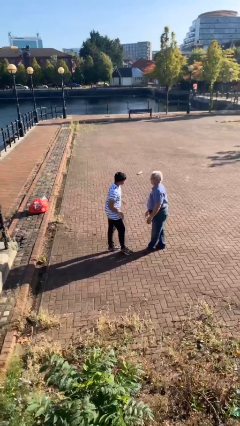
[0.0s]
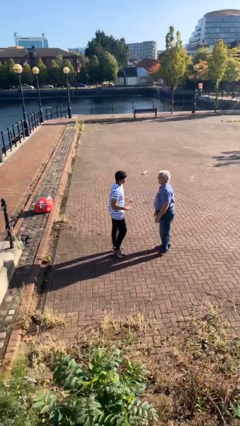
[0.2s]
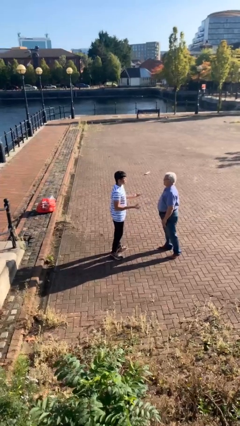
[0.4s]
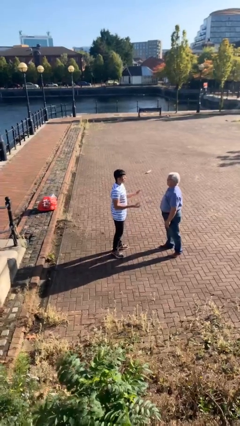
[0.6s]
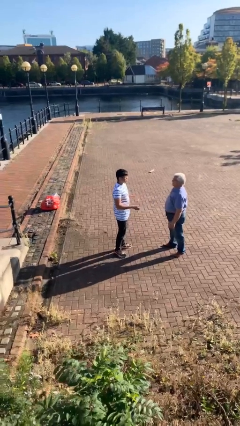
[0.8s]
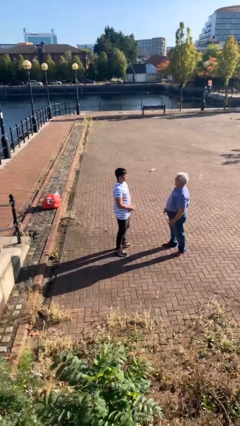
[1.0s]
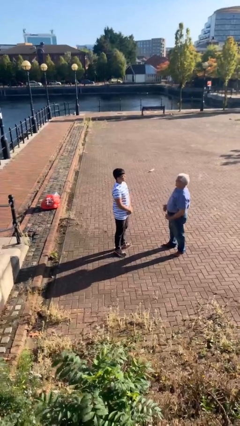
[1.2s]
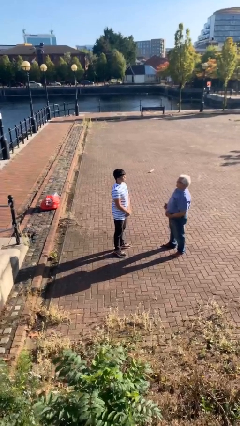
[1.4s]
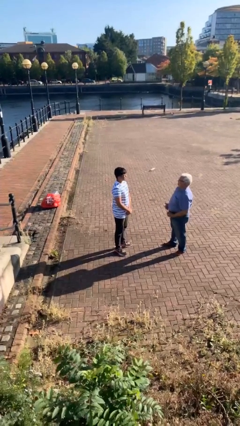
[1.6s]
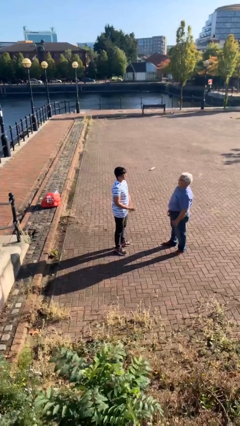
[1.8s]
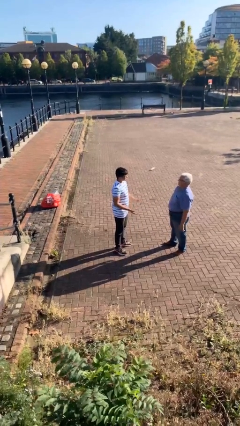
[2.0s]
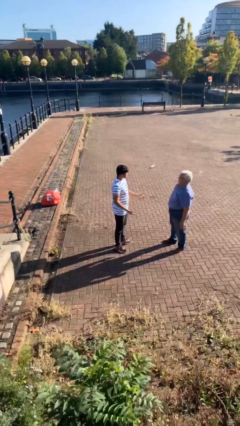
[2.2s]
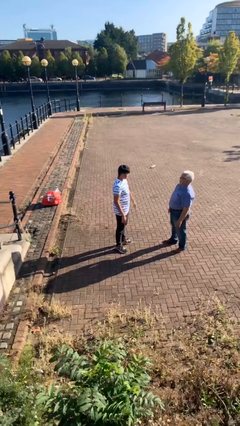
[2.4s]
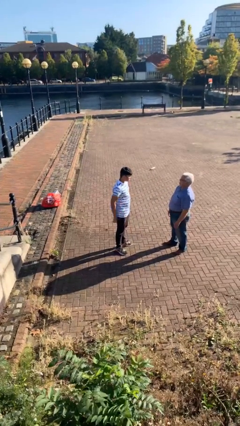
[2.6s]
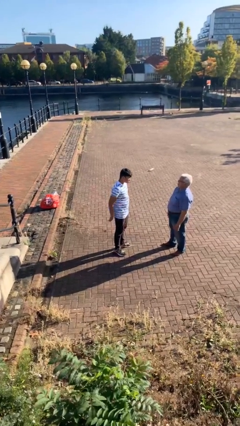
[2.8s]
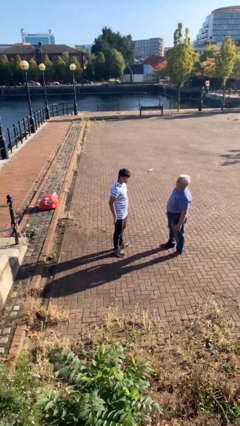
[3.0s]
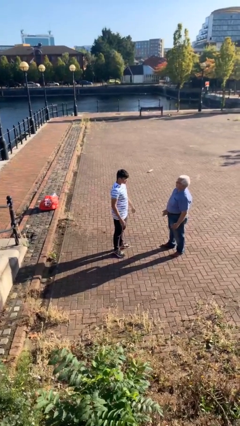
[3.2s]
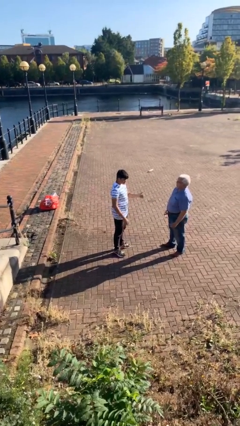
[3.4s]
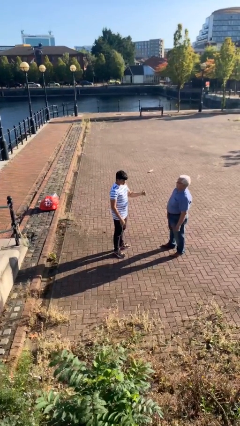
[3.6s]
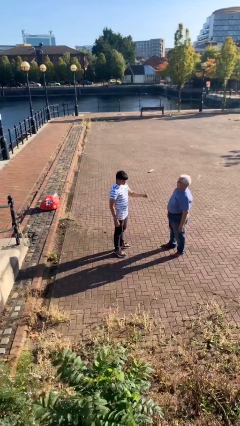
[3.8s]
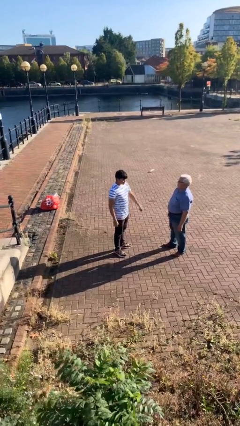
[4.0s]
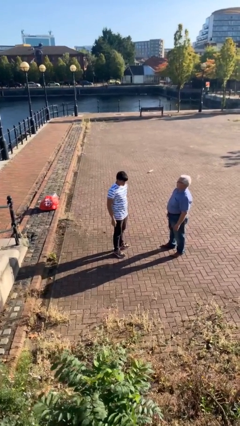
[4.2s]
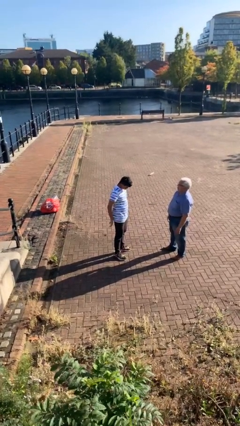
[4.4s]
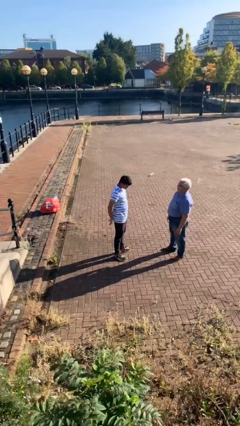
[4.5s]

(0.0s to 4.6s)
person talks to person

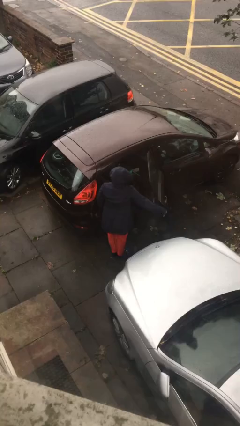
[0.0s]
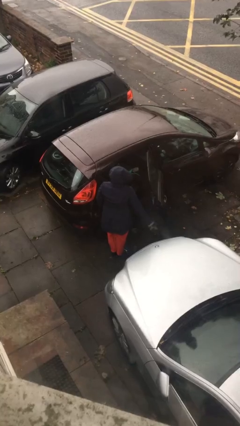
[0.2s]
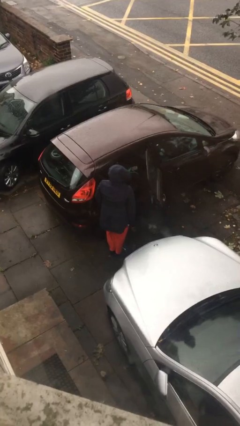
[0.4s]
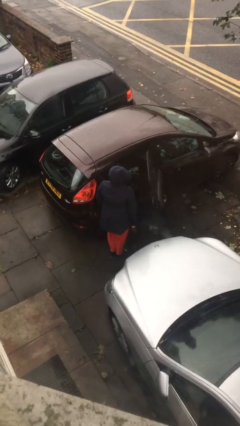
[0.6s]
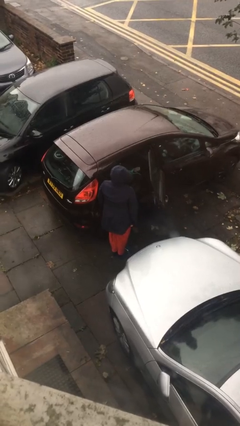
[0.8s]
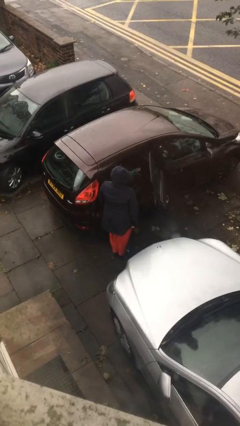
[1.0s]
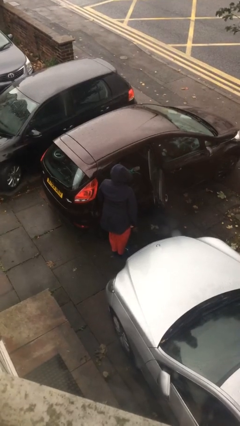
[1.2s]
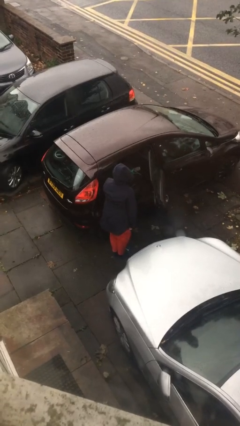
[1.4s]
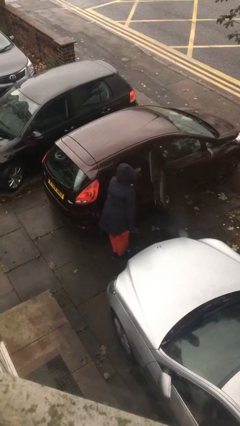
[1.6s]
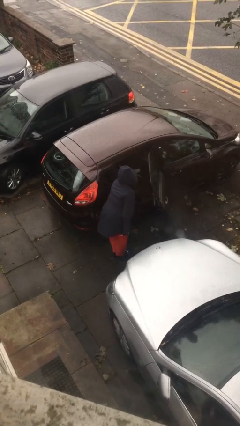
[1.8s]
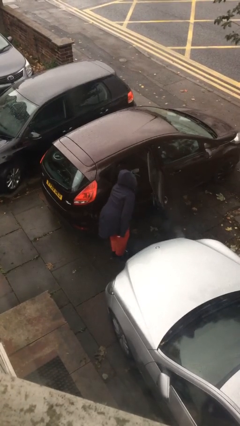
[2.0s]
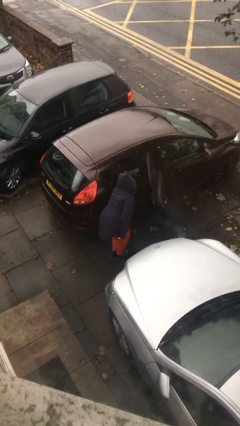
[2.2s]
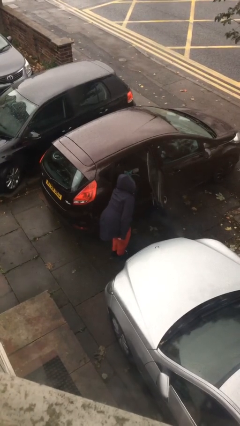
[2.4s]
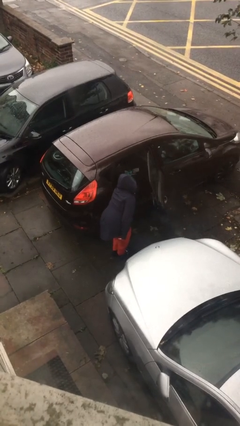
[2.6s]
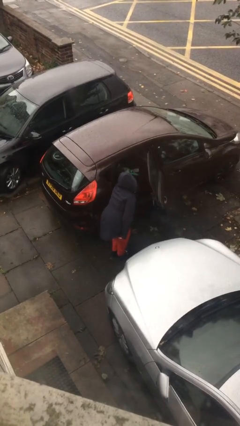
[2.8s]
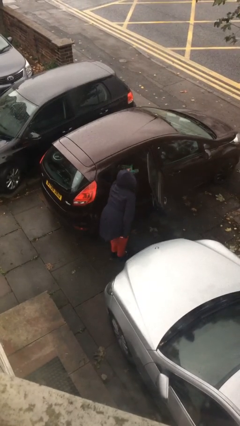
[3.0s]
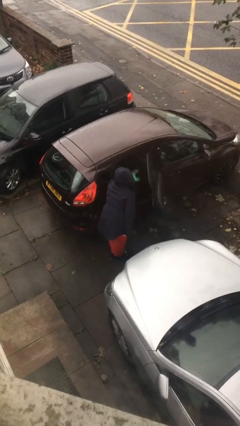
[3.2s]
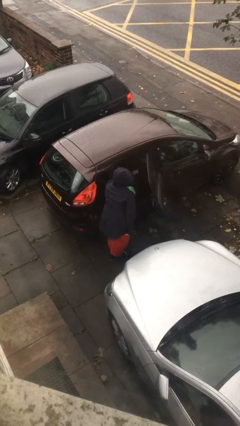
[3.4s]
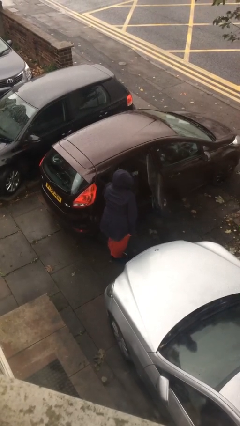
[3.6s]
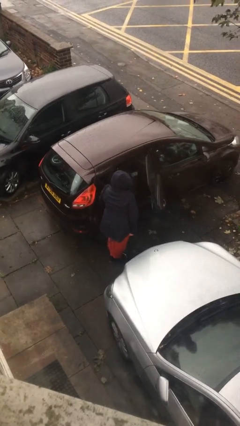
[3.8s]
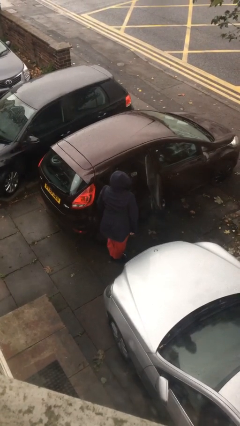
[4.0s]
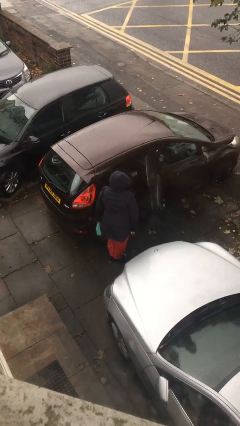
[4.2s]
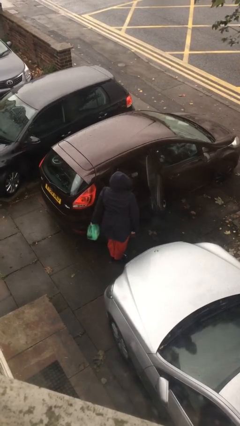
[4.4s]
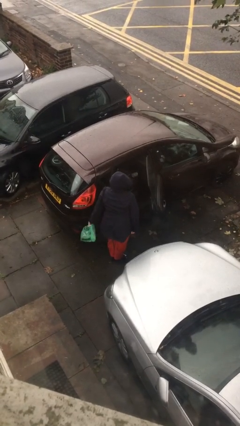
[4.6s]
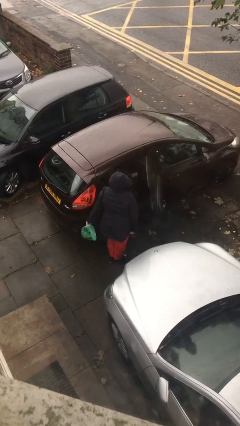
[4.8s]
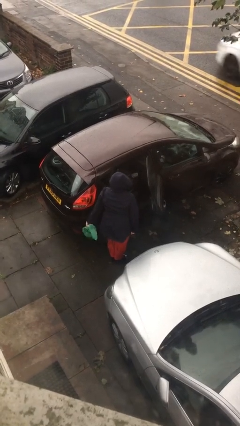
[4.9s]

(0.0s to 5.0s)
person unloads car

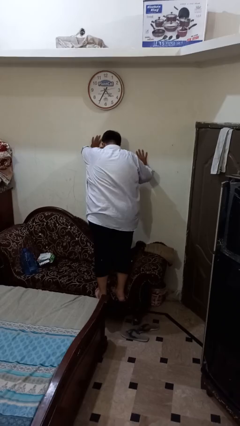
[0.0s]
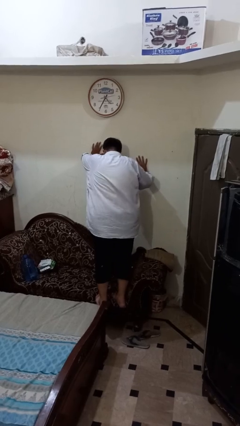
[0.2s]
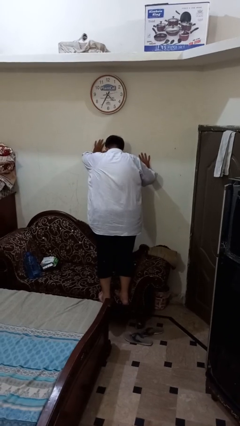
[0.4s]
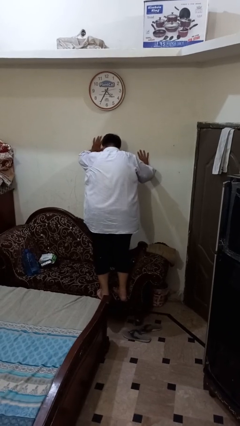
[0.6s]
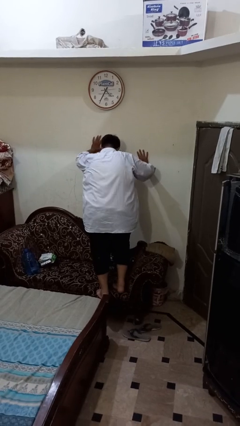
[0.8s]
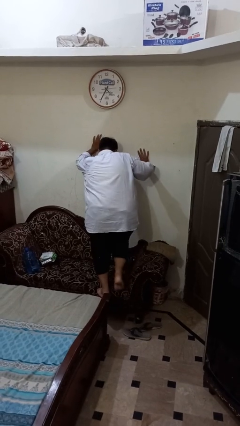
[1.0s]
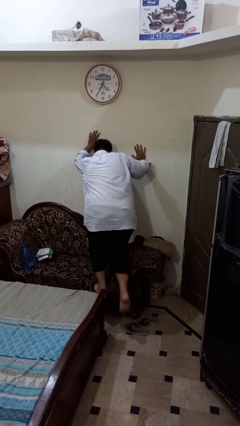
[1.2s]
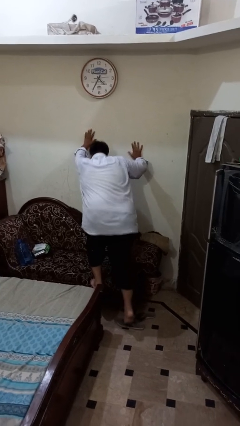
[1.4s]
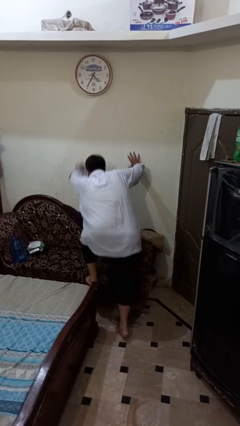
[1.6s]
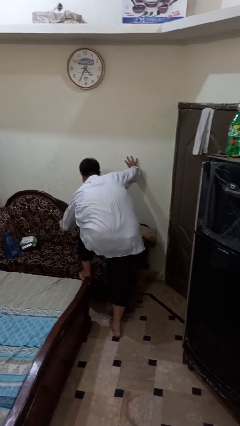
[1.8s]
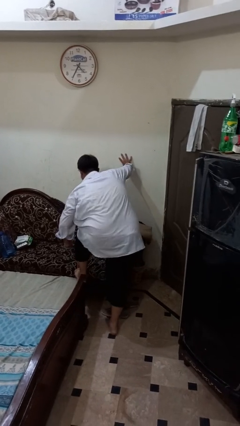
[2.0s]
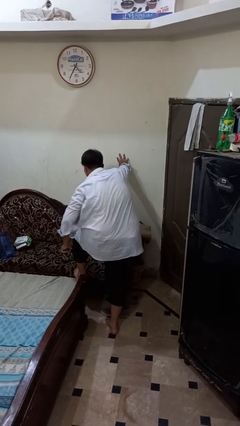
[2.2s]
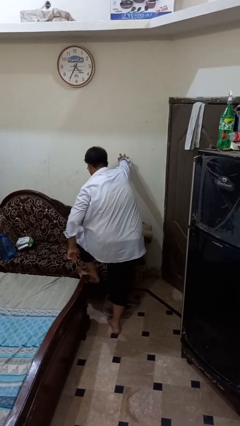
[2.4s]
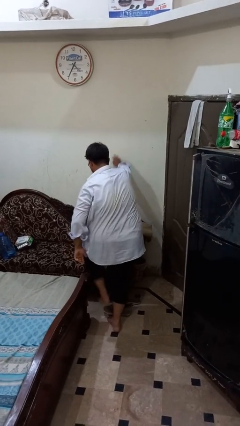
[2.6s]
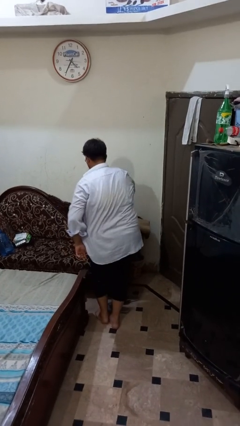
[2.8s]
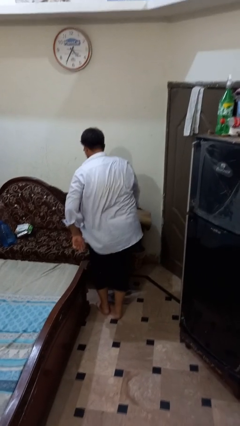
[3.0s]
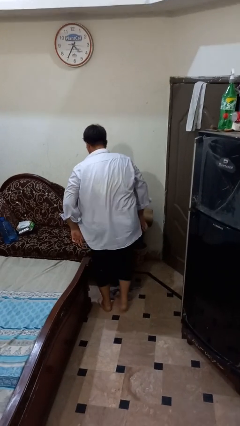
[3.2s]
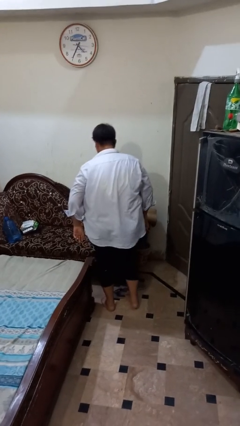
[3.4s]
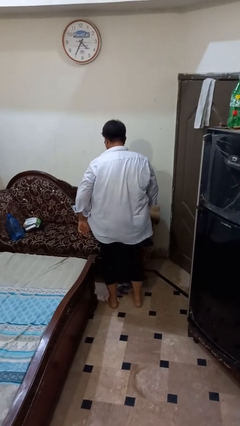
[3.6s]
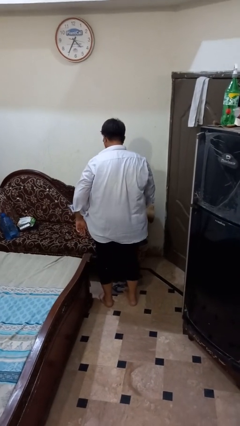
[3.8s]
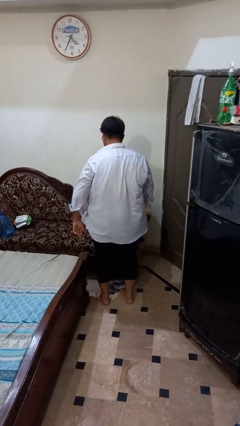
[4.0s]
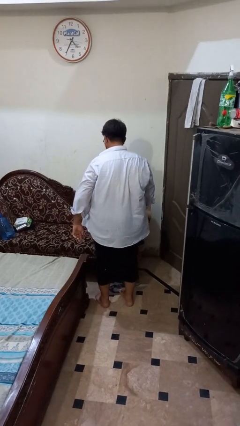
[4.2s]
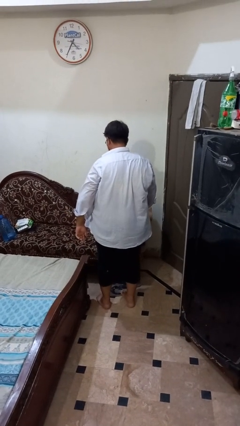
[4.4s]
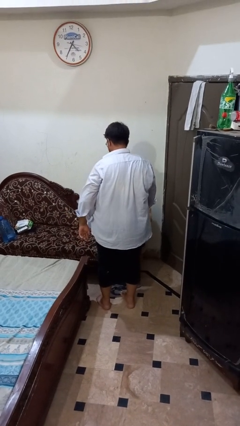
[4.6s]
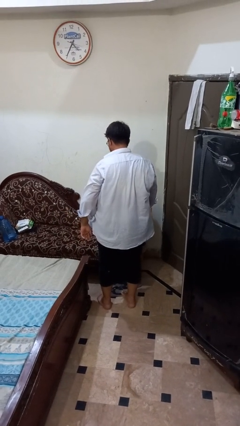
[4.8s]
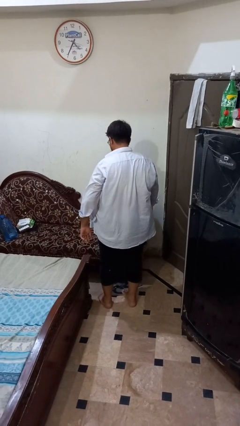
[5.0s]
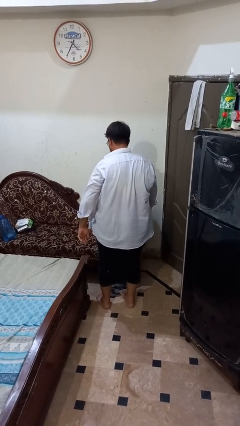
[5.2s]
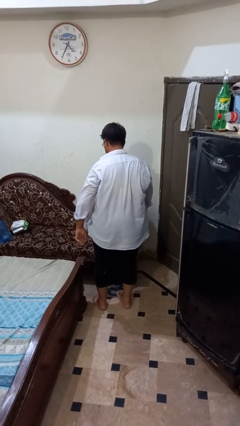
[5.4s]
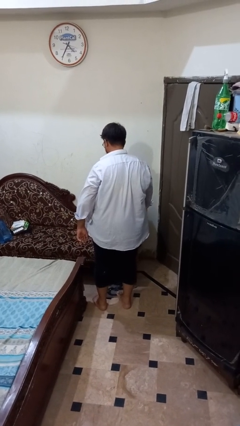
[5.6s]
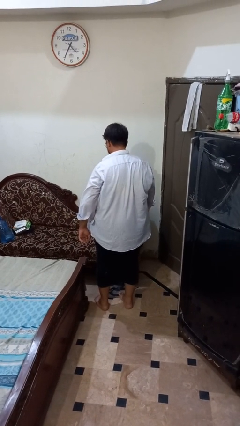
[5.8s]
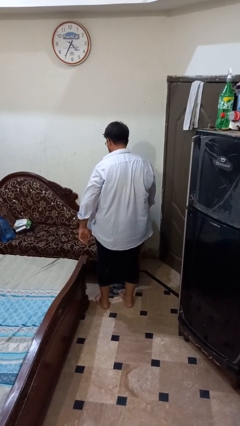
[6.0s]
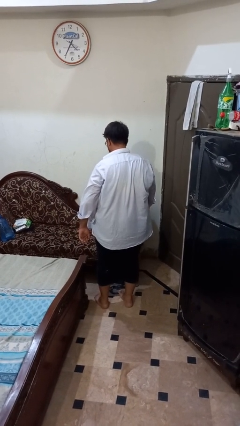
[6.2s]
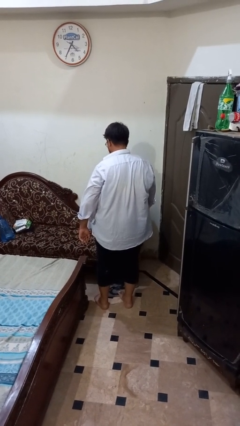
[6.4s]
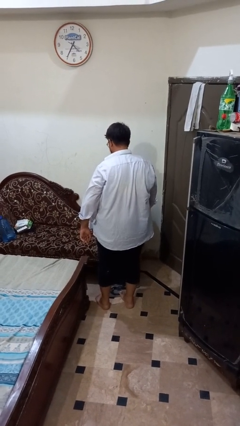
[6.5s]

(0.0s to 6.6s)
person climbs off couch

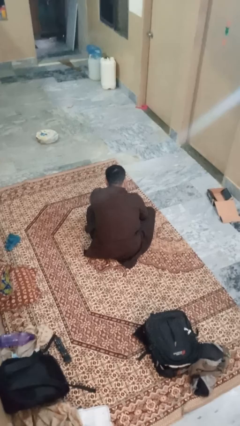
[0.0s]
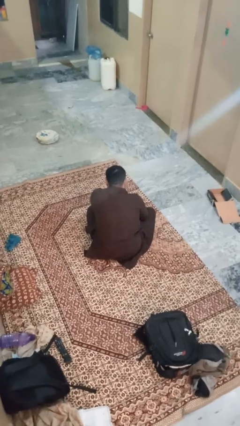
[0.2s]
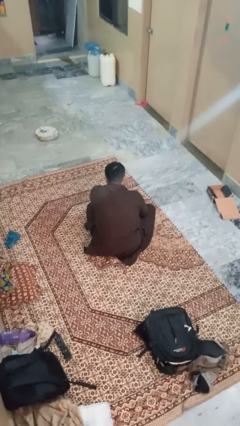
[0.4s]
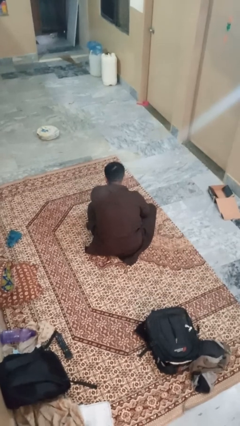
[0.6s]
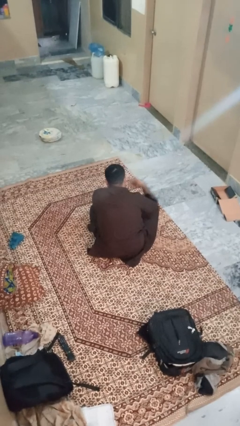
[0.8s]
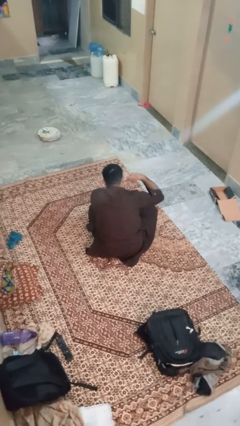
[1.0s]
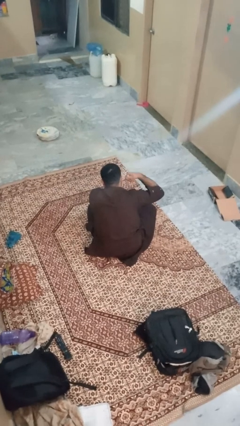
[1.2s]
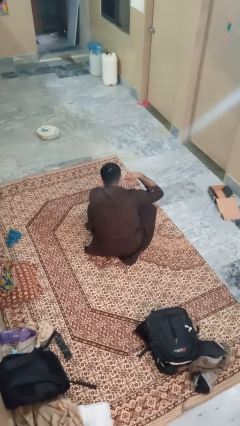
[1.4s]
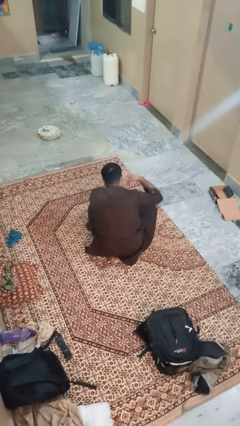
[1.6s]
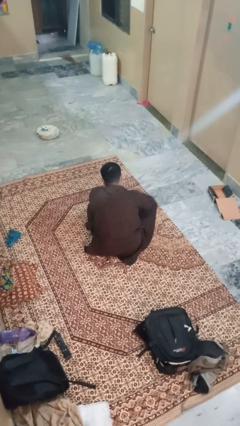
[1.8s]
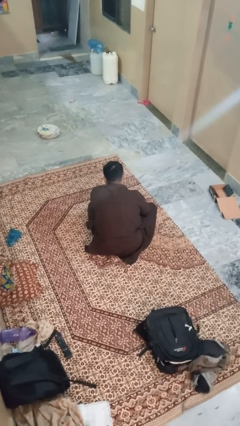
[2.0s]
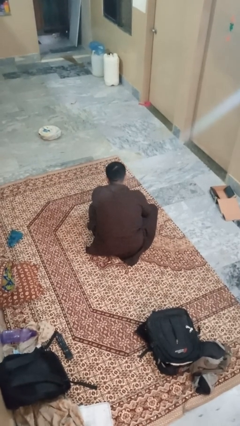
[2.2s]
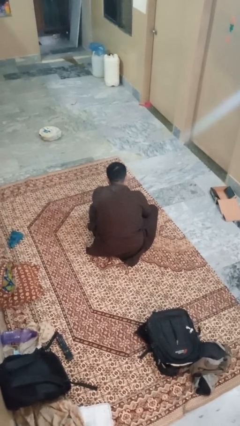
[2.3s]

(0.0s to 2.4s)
person gestures call me
